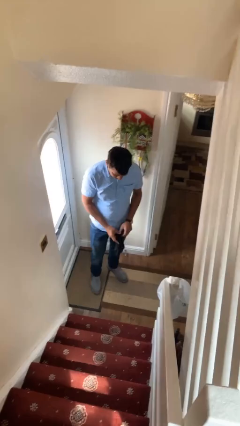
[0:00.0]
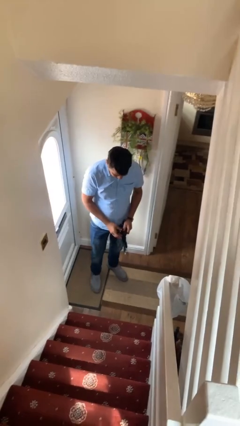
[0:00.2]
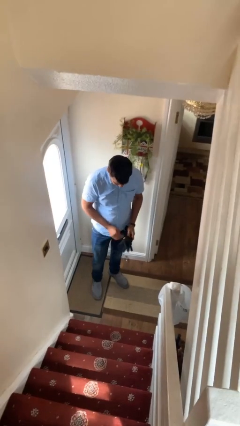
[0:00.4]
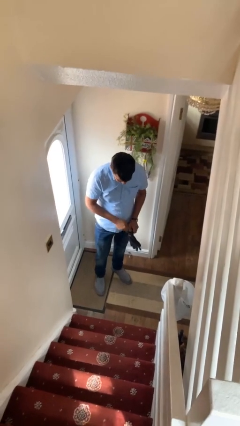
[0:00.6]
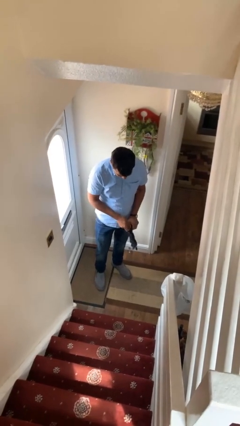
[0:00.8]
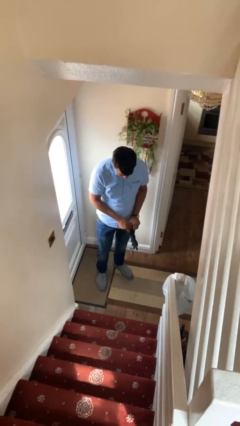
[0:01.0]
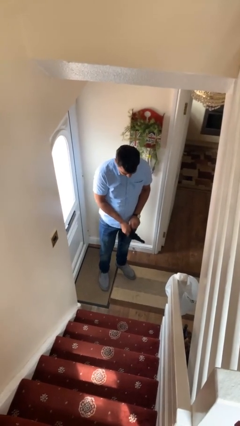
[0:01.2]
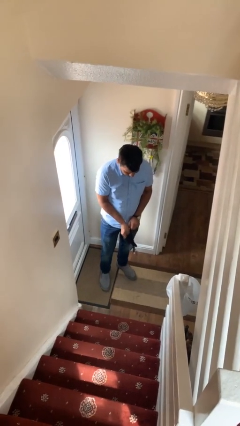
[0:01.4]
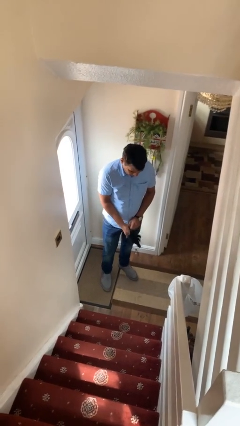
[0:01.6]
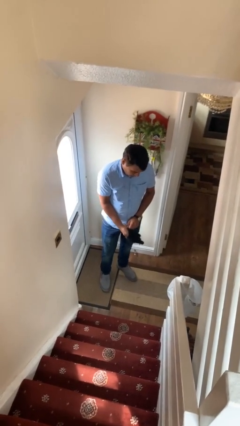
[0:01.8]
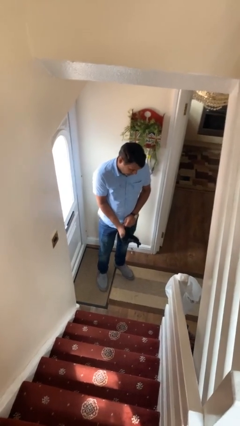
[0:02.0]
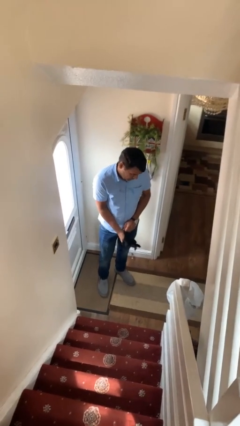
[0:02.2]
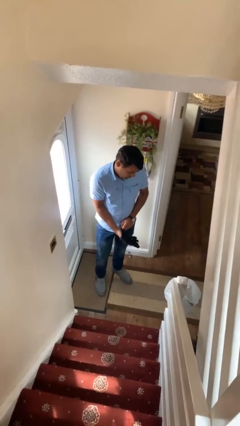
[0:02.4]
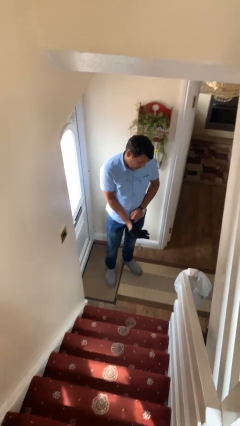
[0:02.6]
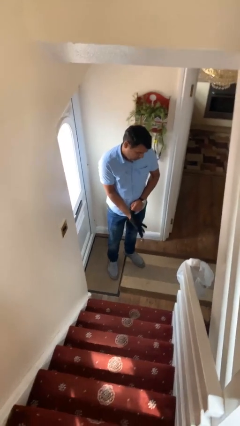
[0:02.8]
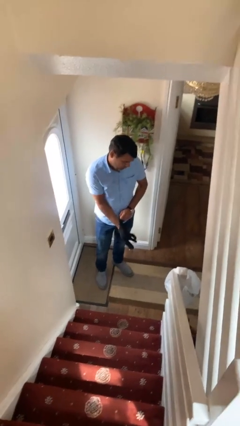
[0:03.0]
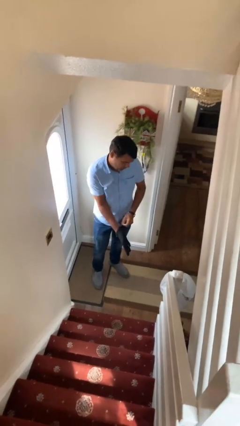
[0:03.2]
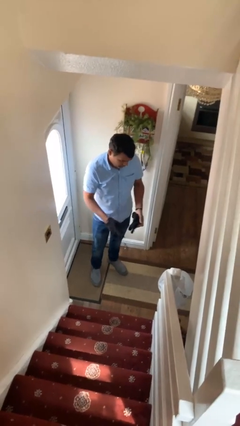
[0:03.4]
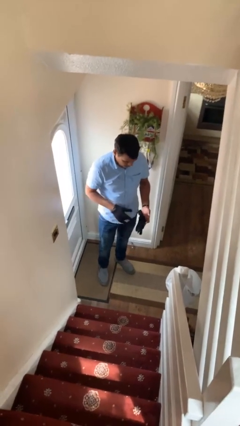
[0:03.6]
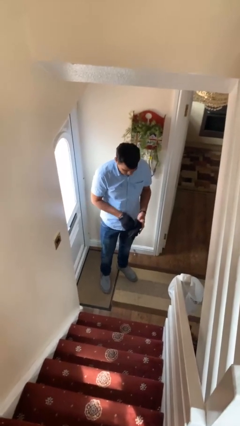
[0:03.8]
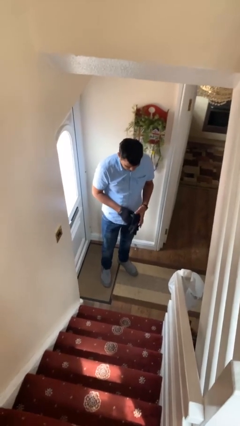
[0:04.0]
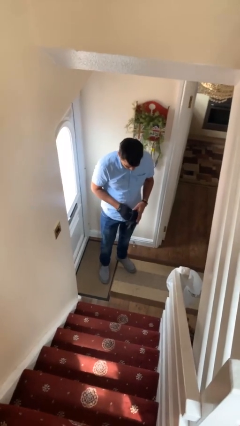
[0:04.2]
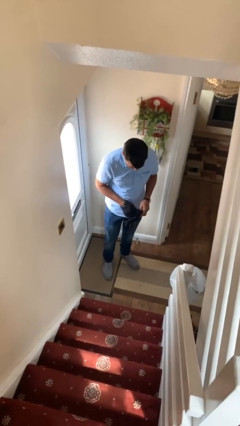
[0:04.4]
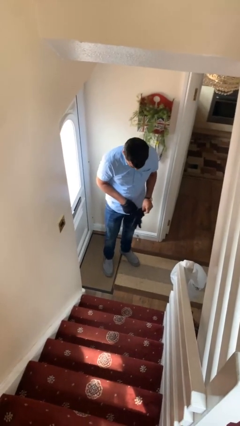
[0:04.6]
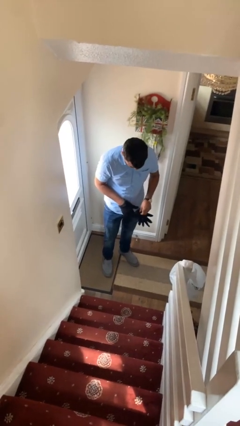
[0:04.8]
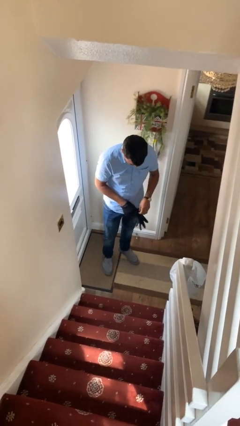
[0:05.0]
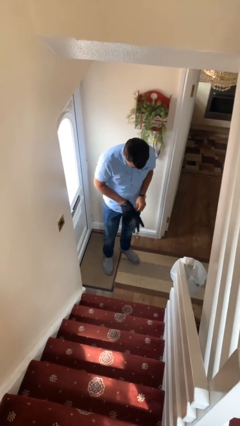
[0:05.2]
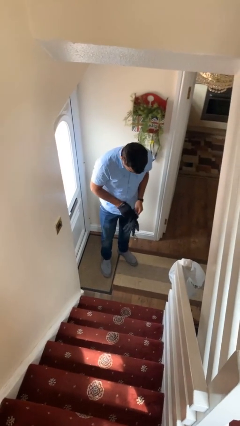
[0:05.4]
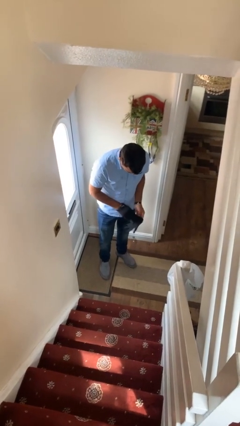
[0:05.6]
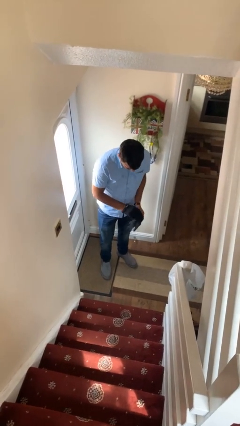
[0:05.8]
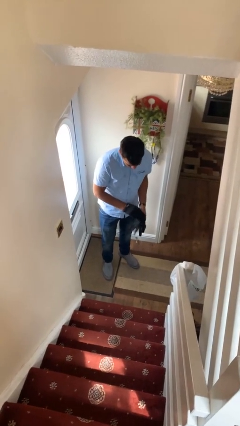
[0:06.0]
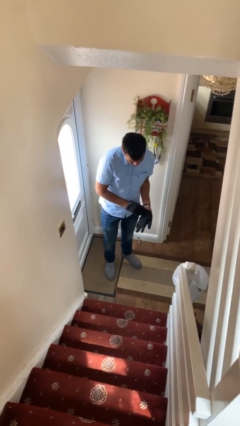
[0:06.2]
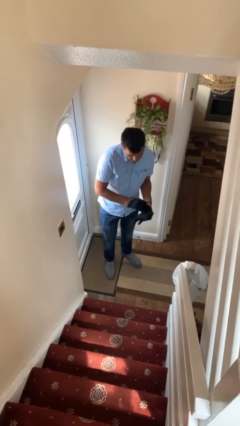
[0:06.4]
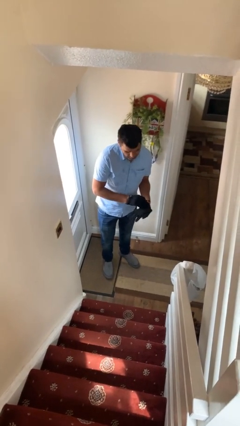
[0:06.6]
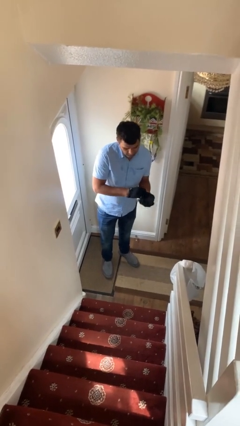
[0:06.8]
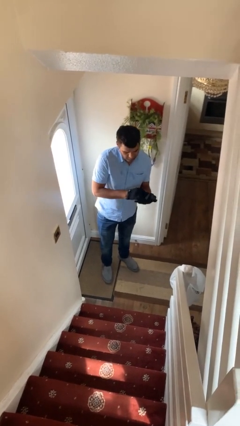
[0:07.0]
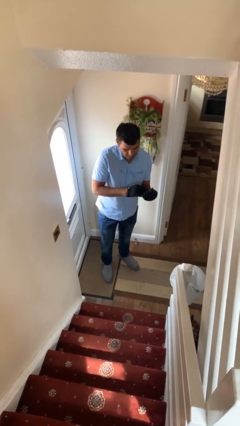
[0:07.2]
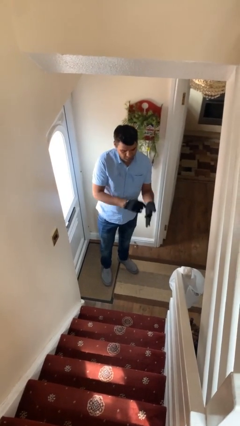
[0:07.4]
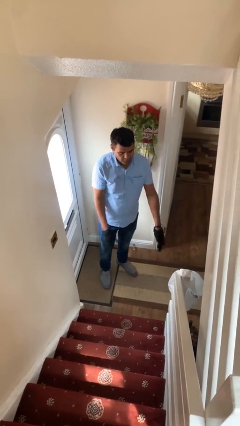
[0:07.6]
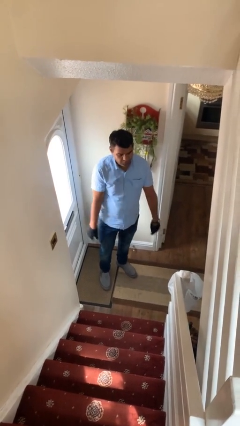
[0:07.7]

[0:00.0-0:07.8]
person puts on gloves

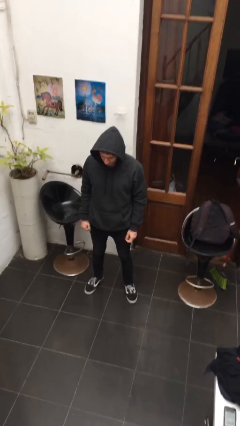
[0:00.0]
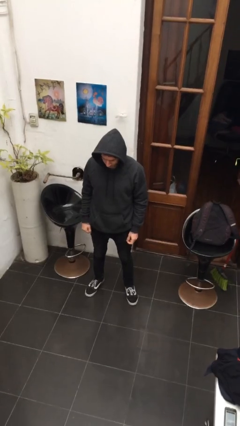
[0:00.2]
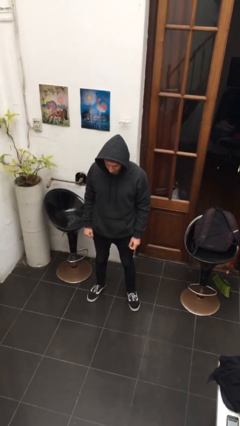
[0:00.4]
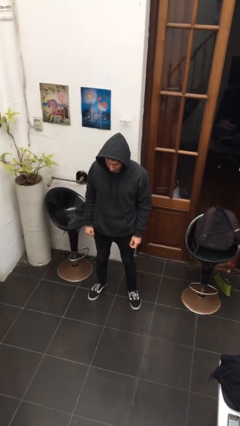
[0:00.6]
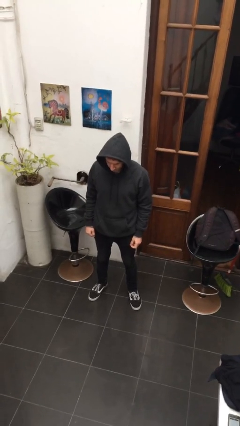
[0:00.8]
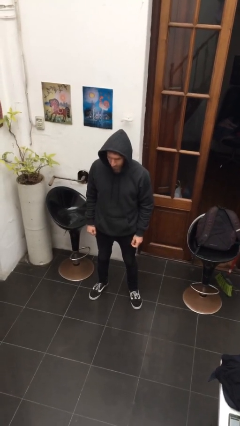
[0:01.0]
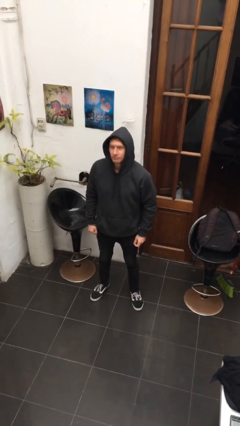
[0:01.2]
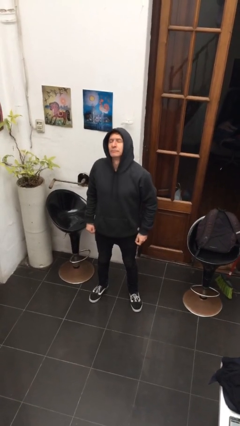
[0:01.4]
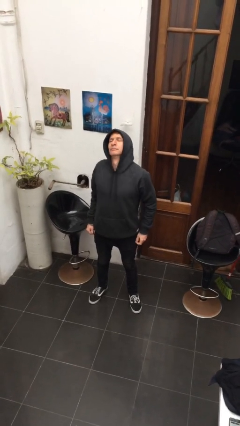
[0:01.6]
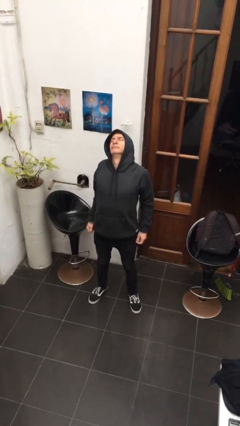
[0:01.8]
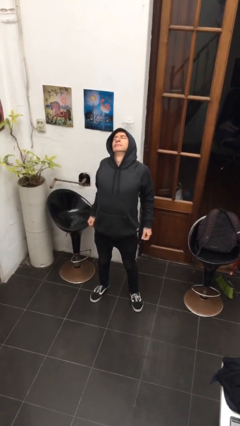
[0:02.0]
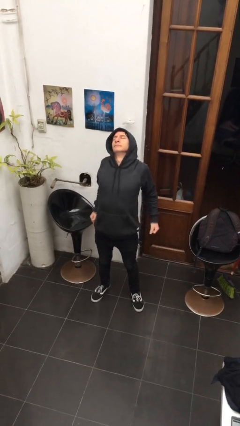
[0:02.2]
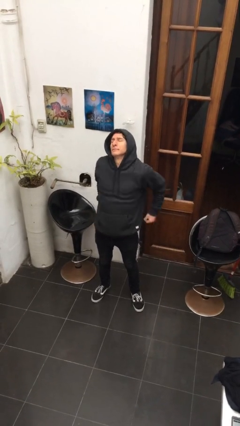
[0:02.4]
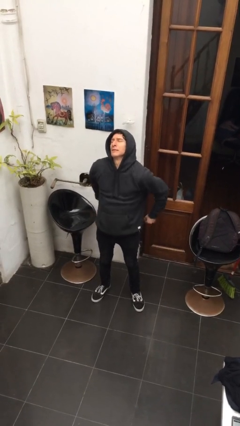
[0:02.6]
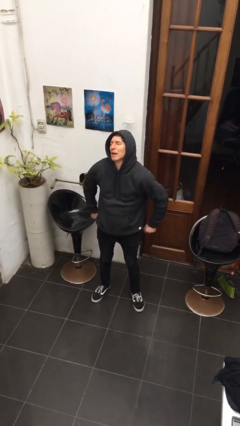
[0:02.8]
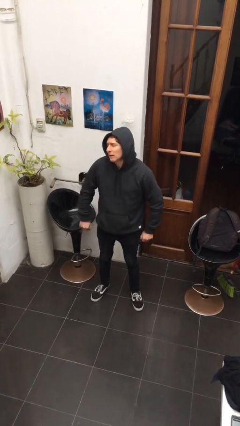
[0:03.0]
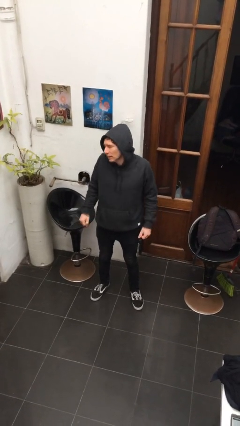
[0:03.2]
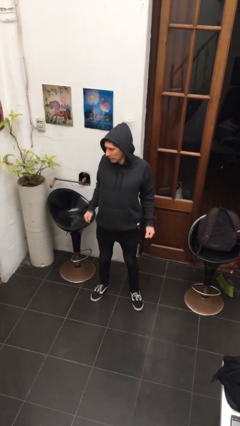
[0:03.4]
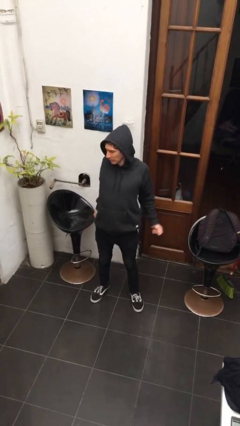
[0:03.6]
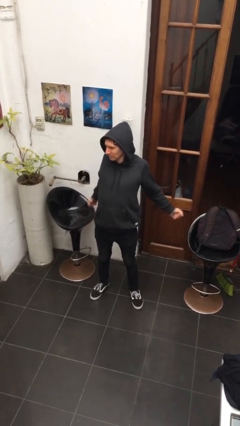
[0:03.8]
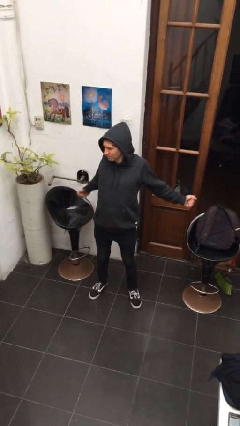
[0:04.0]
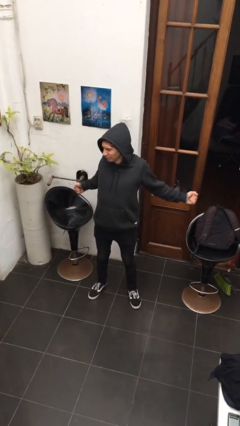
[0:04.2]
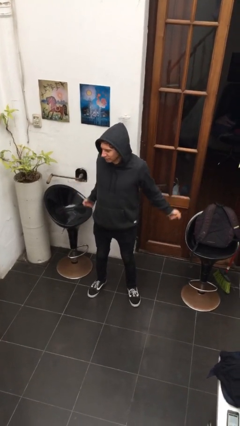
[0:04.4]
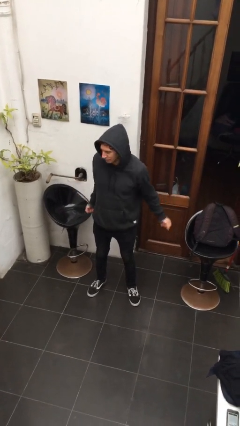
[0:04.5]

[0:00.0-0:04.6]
person stretches back

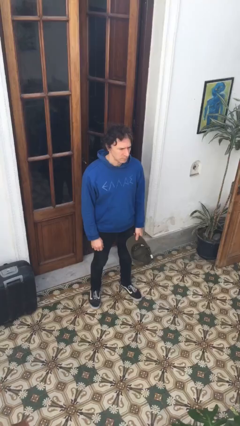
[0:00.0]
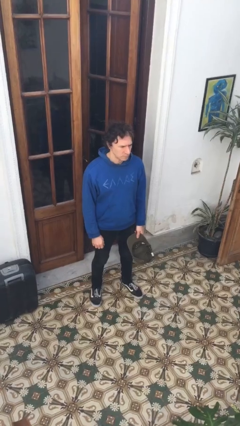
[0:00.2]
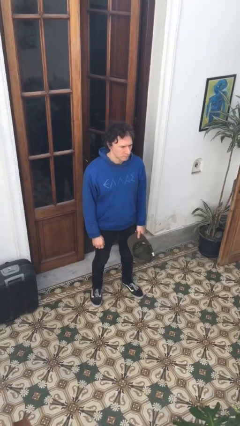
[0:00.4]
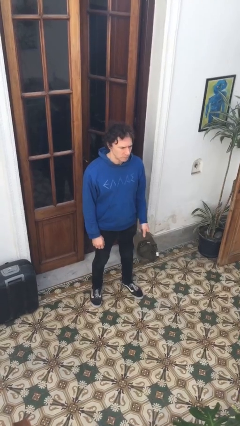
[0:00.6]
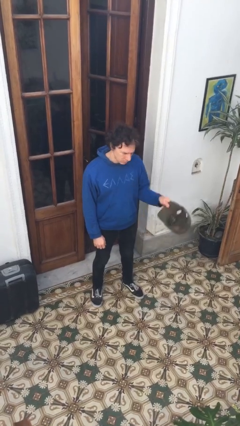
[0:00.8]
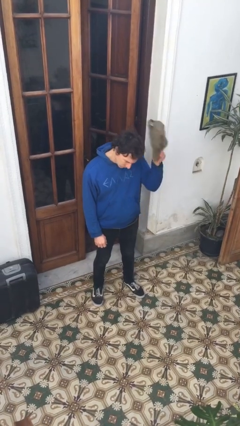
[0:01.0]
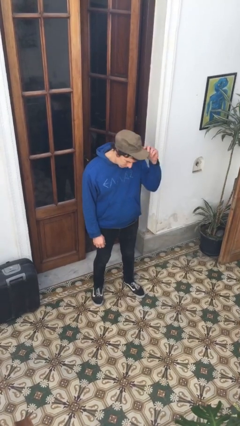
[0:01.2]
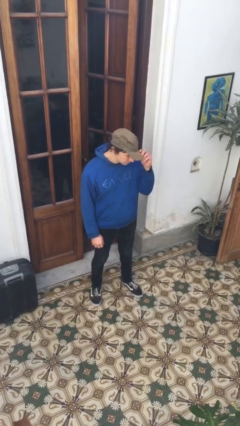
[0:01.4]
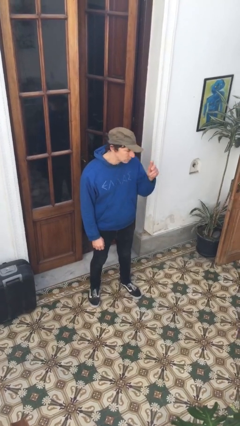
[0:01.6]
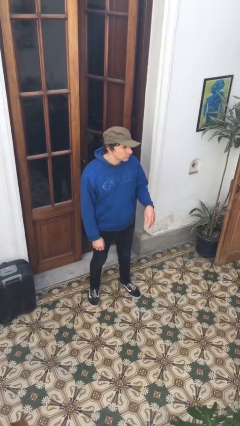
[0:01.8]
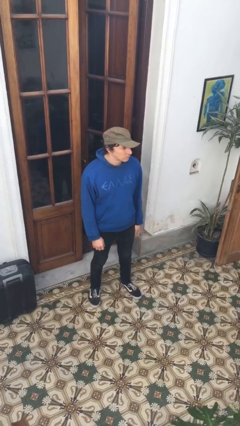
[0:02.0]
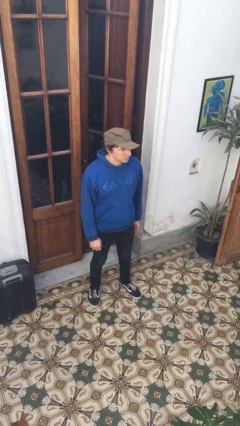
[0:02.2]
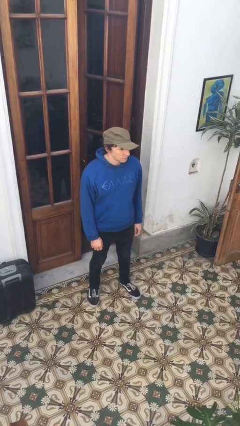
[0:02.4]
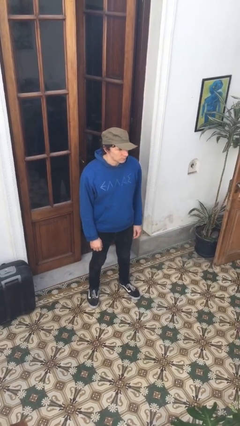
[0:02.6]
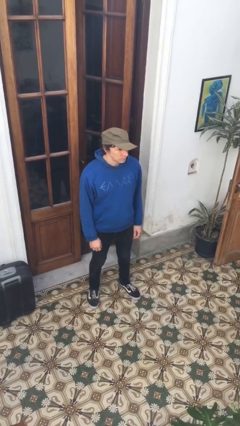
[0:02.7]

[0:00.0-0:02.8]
person puts on hat

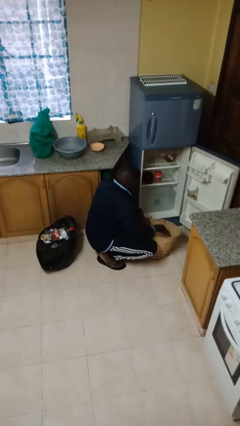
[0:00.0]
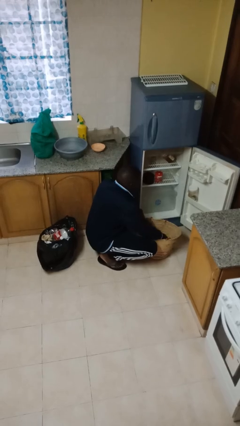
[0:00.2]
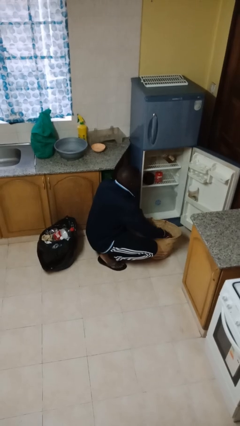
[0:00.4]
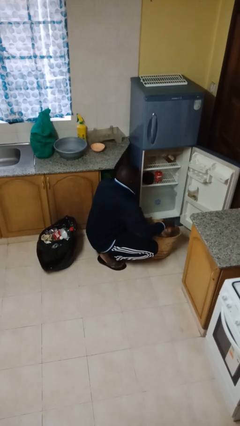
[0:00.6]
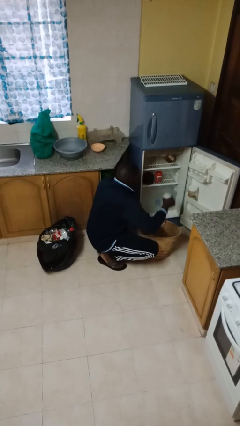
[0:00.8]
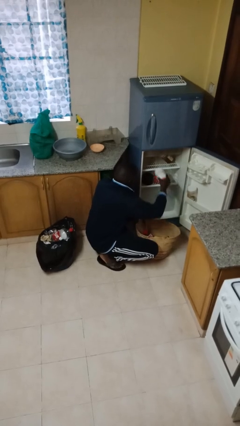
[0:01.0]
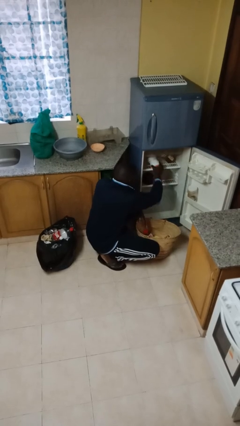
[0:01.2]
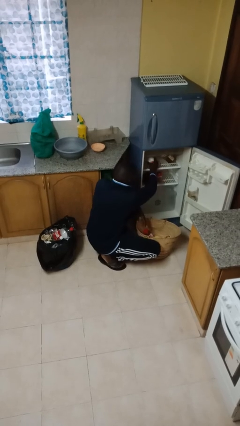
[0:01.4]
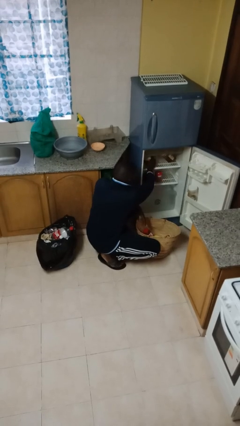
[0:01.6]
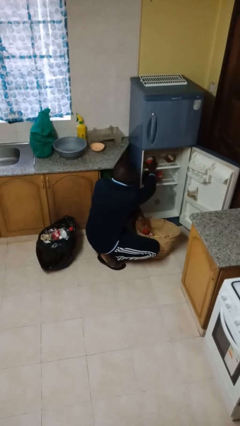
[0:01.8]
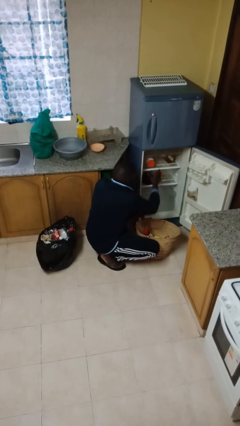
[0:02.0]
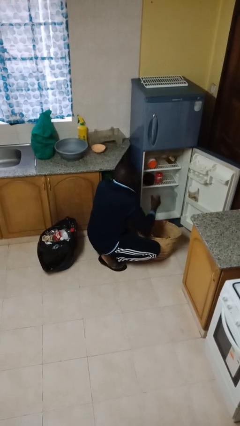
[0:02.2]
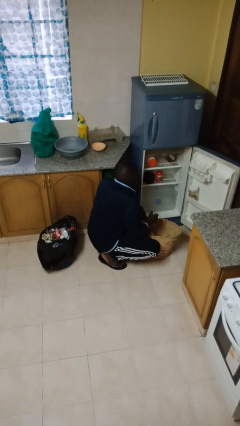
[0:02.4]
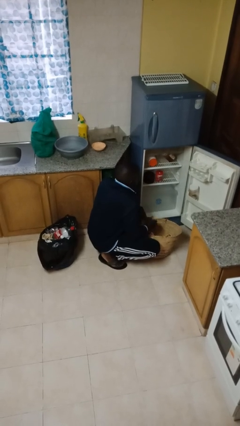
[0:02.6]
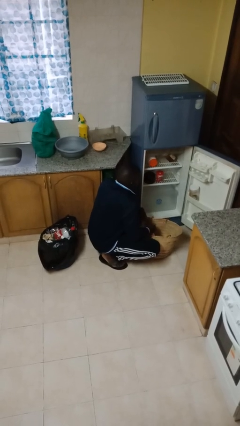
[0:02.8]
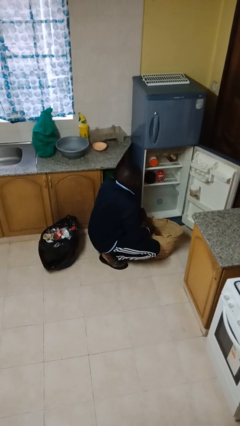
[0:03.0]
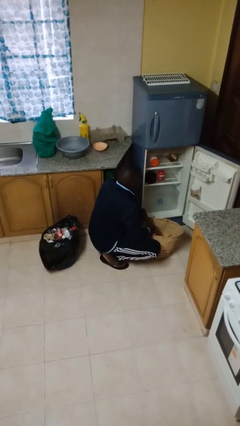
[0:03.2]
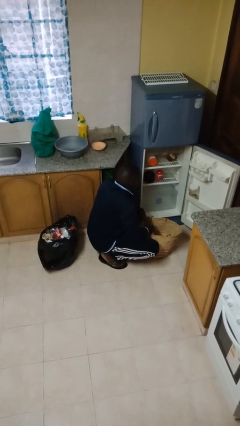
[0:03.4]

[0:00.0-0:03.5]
person loads groceries into refrigerator
